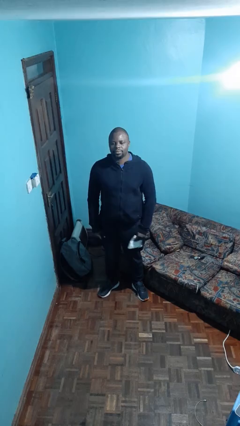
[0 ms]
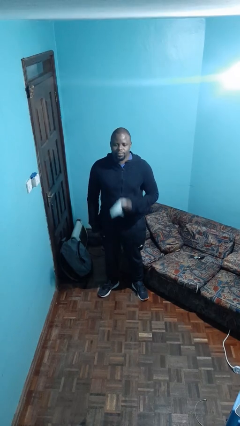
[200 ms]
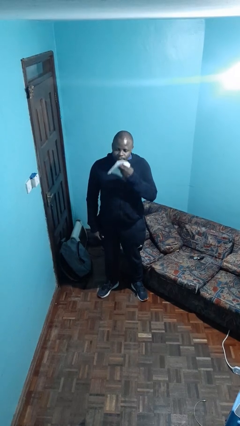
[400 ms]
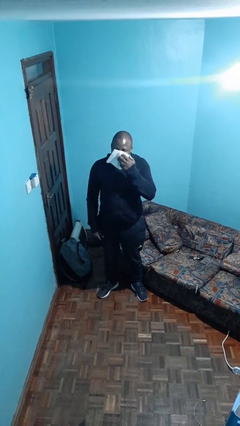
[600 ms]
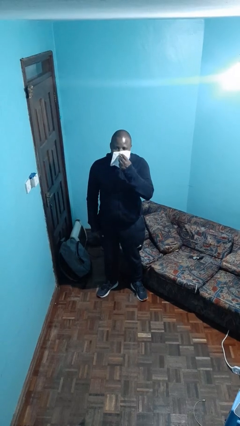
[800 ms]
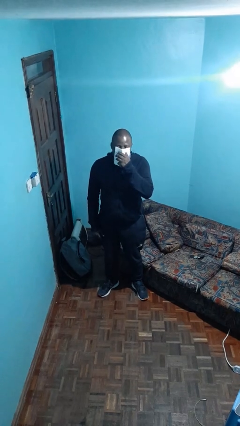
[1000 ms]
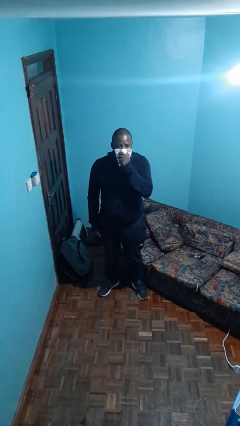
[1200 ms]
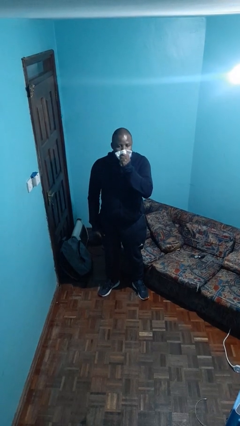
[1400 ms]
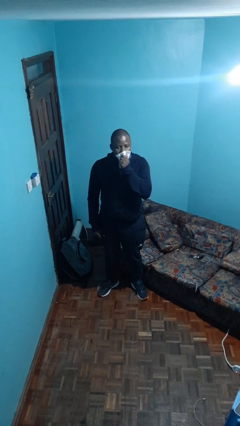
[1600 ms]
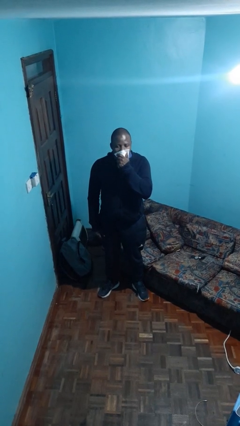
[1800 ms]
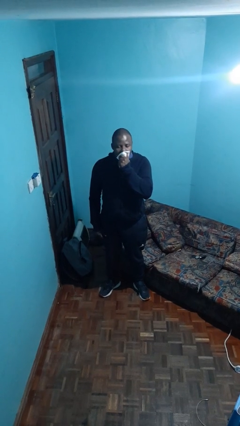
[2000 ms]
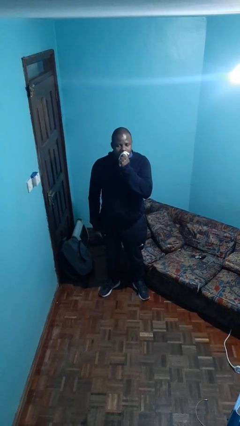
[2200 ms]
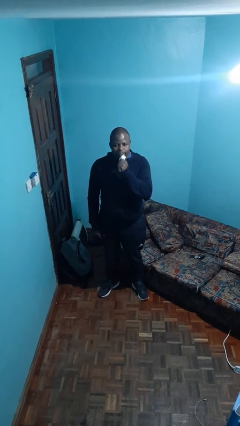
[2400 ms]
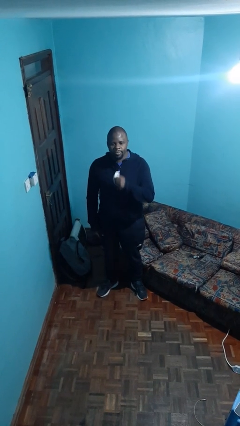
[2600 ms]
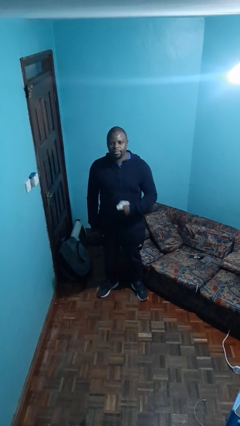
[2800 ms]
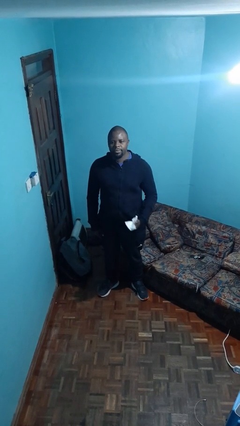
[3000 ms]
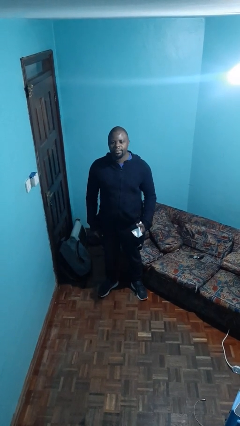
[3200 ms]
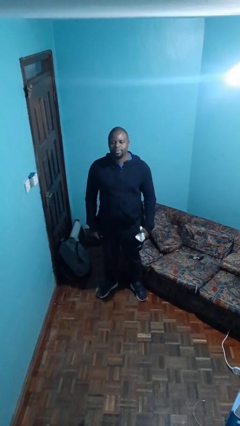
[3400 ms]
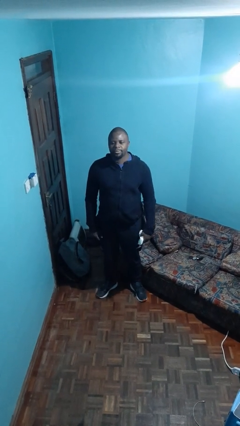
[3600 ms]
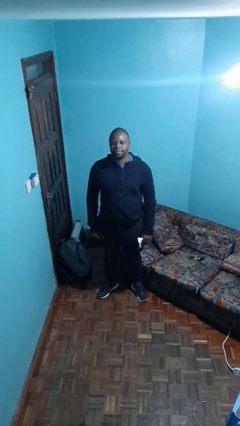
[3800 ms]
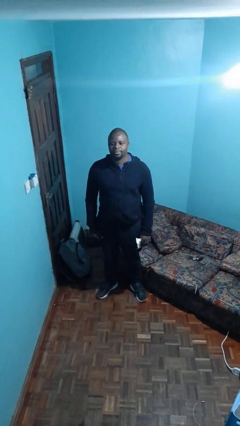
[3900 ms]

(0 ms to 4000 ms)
person wipes mouth with napkin

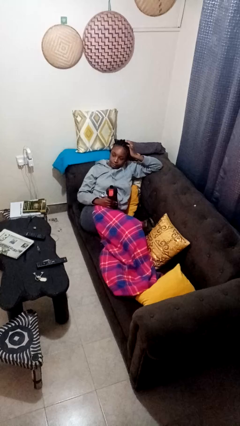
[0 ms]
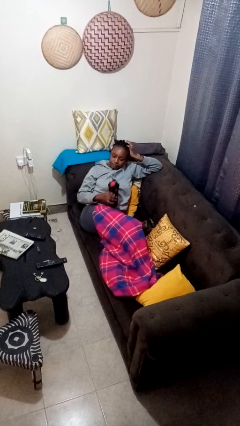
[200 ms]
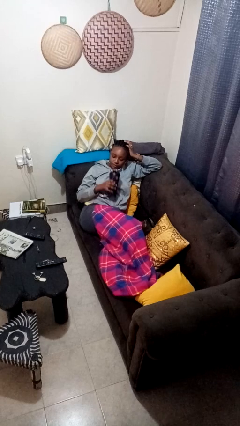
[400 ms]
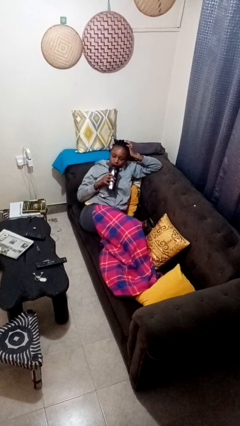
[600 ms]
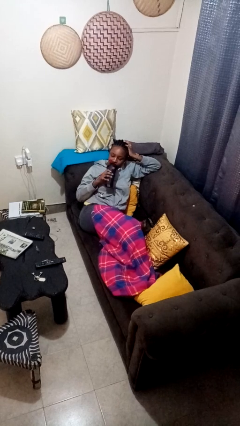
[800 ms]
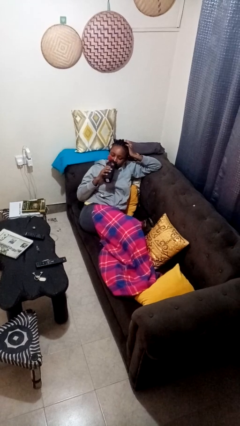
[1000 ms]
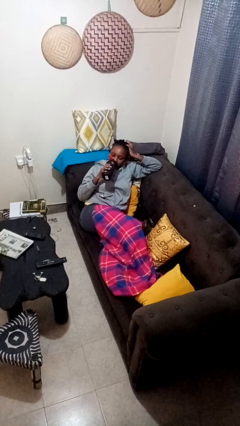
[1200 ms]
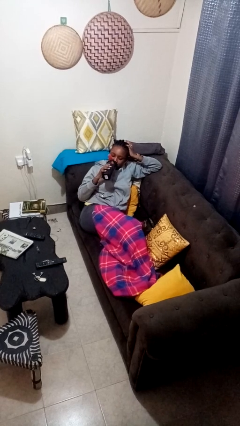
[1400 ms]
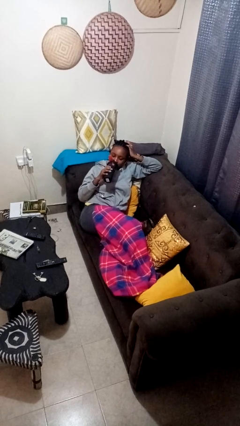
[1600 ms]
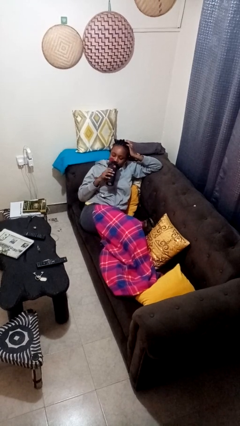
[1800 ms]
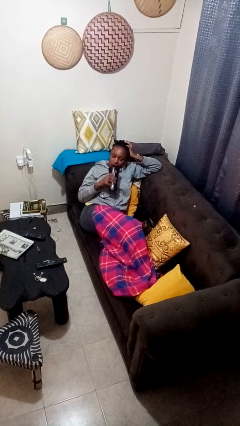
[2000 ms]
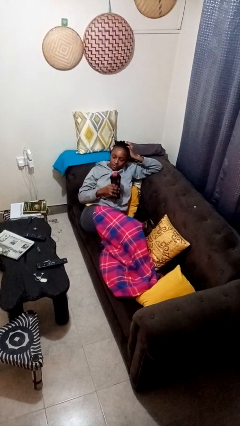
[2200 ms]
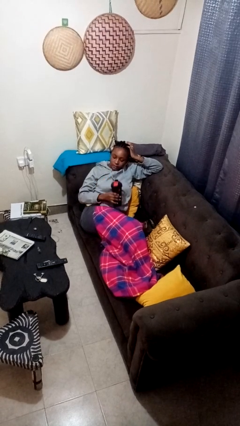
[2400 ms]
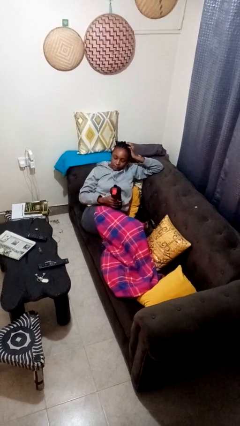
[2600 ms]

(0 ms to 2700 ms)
person drinks from bottle

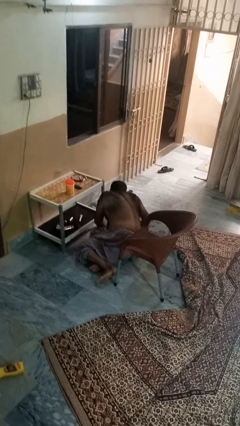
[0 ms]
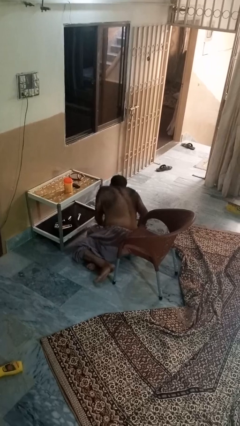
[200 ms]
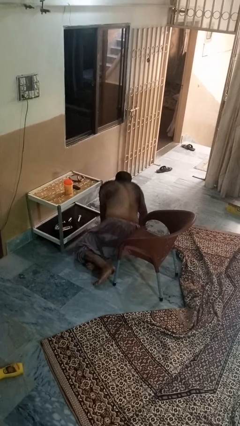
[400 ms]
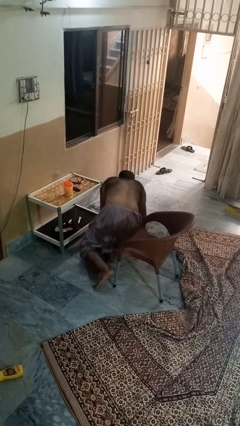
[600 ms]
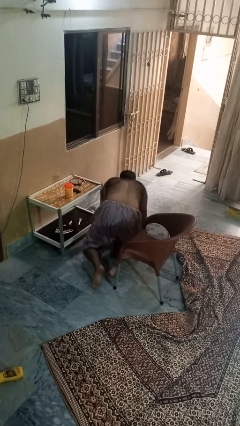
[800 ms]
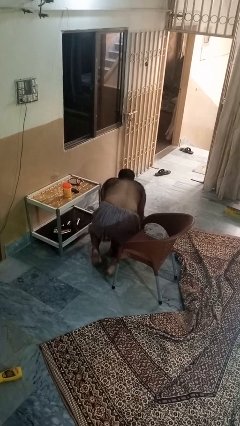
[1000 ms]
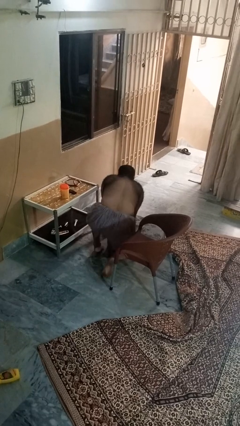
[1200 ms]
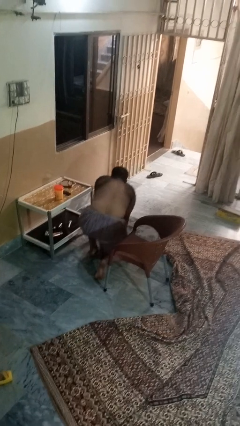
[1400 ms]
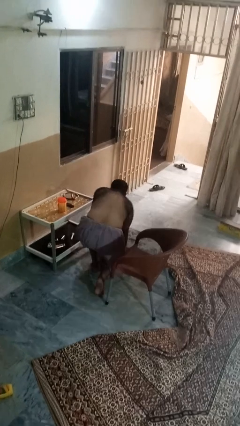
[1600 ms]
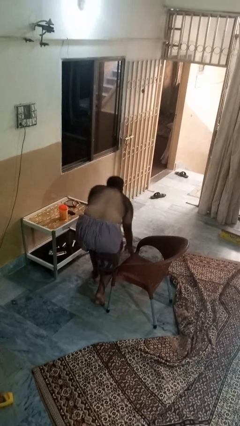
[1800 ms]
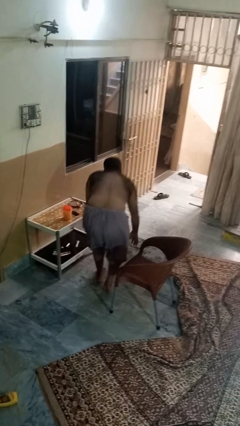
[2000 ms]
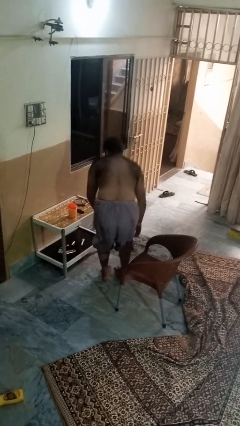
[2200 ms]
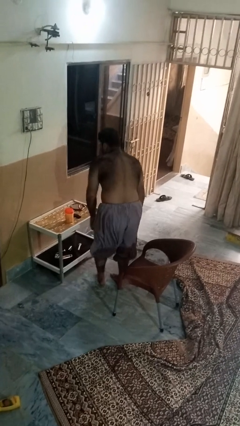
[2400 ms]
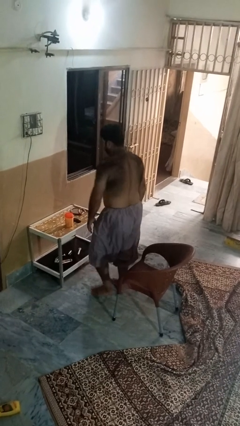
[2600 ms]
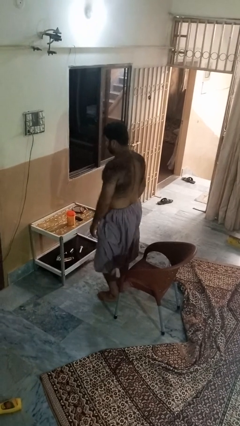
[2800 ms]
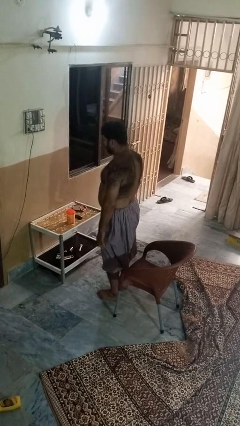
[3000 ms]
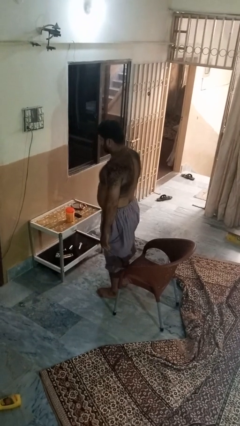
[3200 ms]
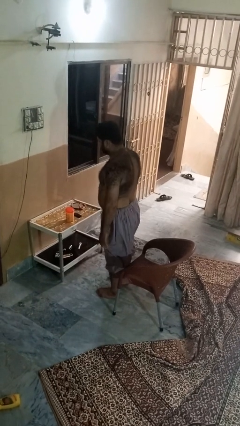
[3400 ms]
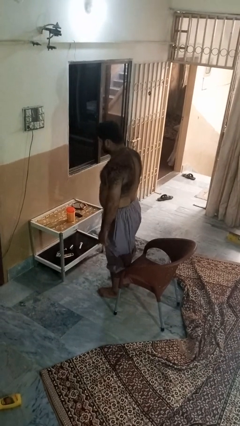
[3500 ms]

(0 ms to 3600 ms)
person stands up from floor

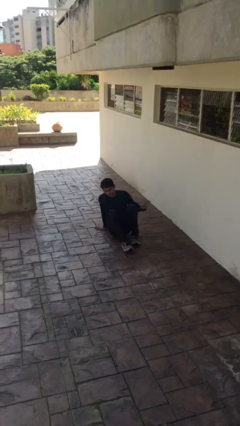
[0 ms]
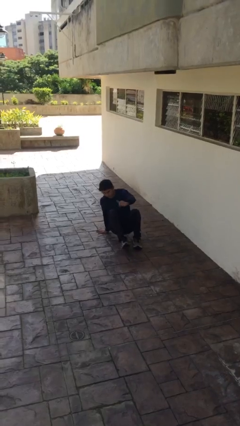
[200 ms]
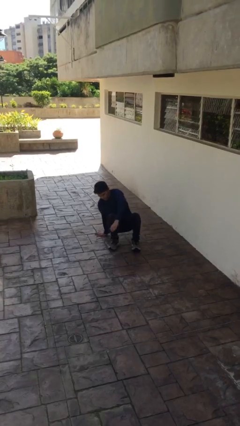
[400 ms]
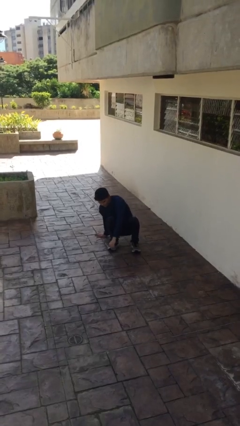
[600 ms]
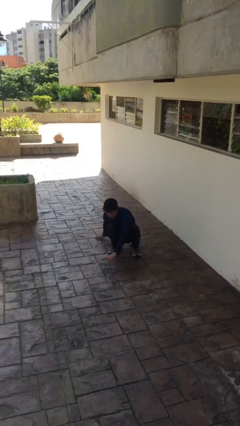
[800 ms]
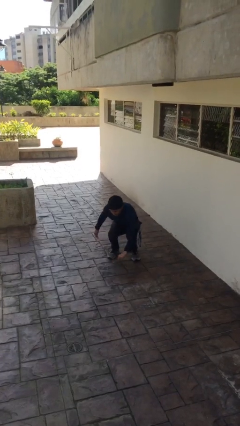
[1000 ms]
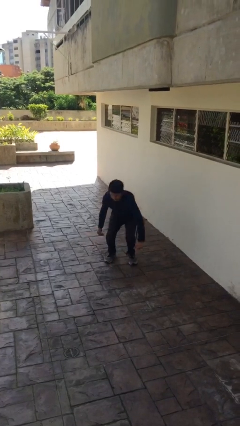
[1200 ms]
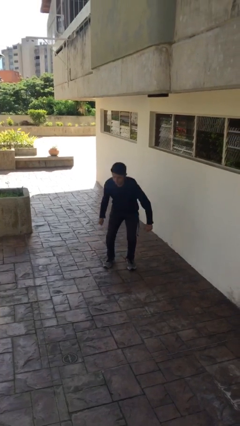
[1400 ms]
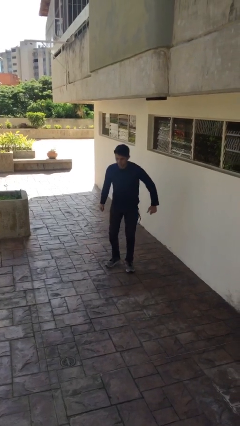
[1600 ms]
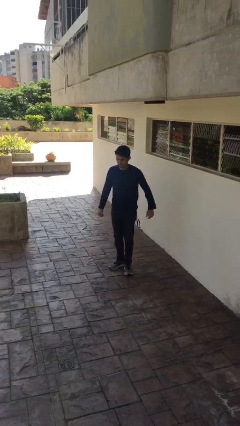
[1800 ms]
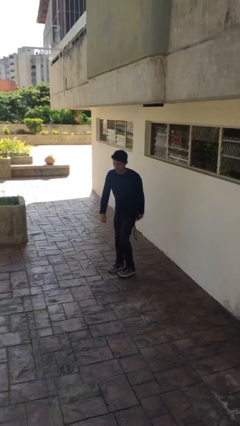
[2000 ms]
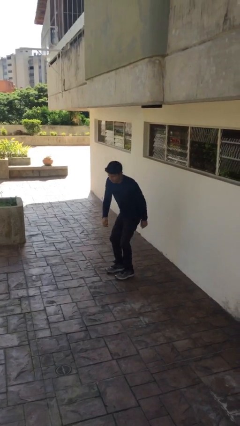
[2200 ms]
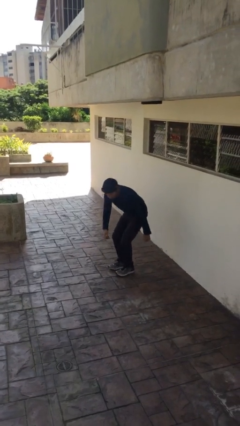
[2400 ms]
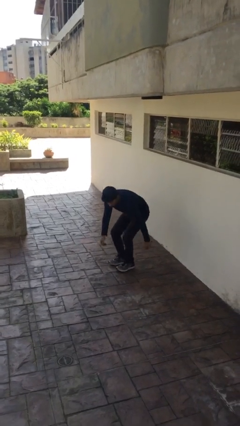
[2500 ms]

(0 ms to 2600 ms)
person stands up

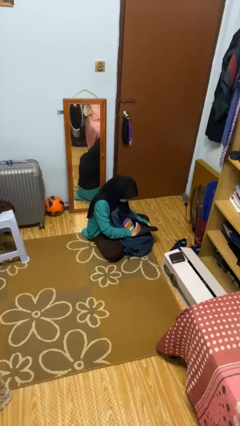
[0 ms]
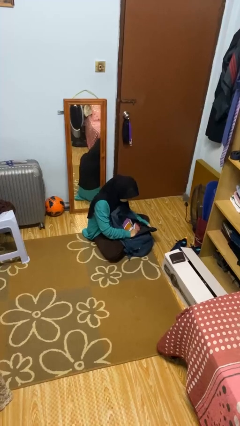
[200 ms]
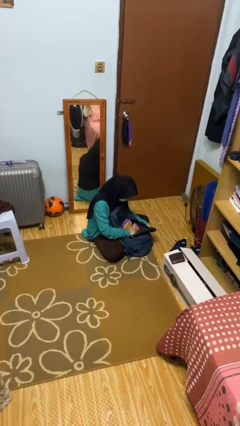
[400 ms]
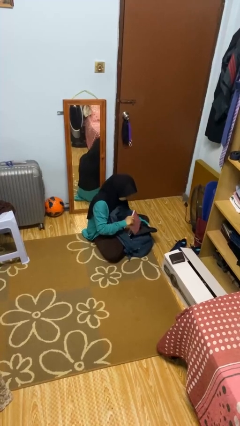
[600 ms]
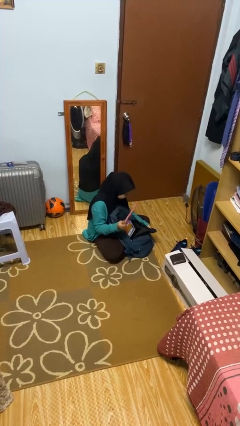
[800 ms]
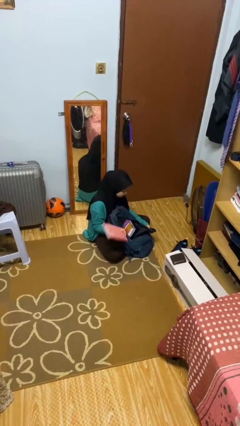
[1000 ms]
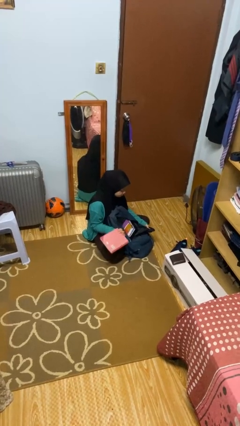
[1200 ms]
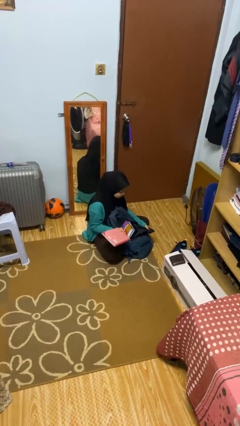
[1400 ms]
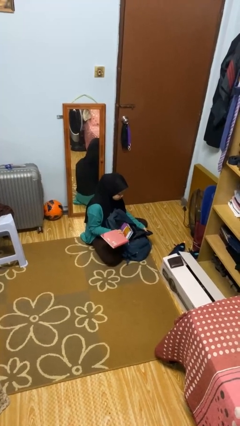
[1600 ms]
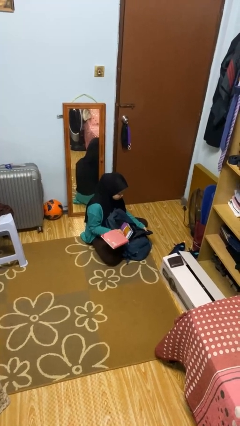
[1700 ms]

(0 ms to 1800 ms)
person takes object from backpack

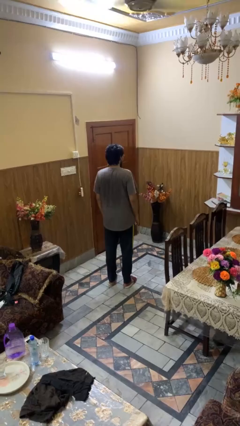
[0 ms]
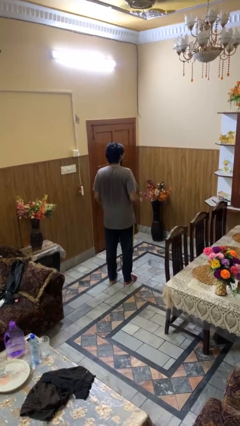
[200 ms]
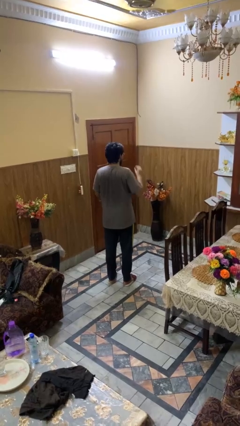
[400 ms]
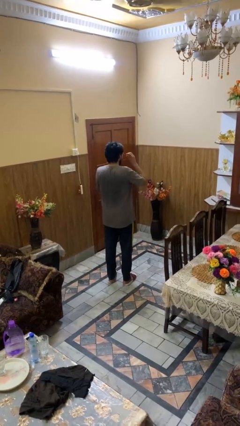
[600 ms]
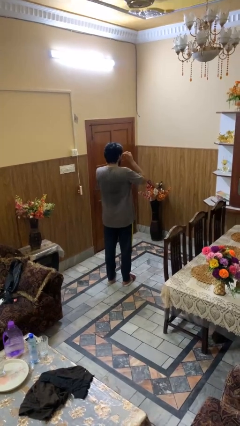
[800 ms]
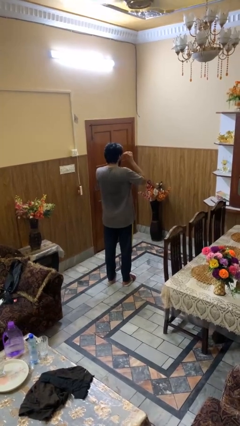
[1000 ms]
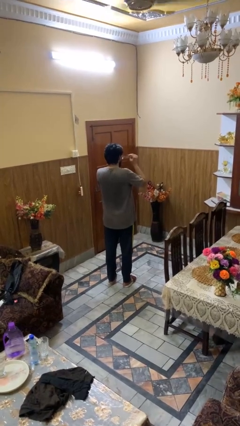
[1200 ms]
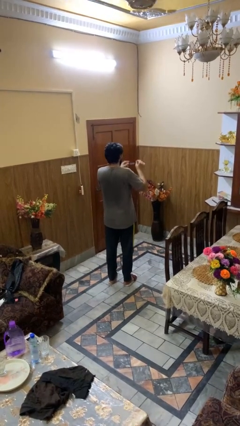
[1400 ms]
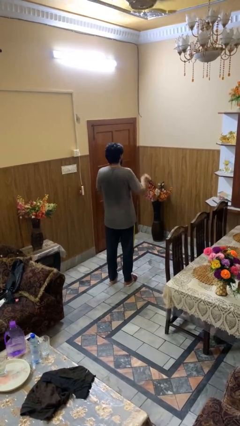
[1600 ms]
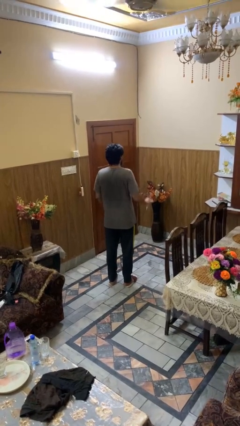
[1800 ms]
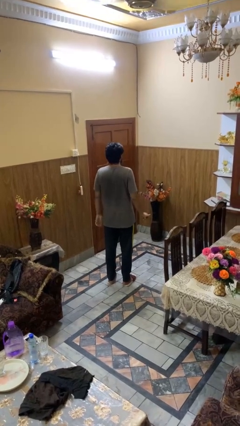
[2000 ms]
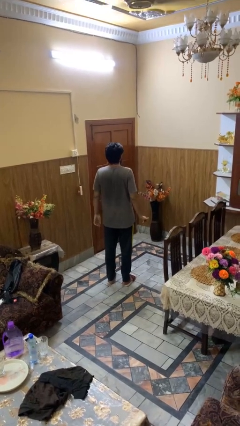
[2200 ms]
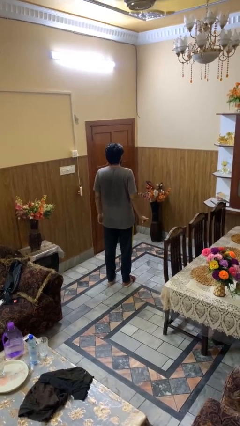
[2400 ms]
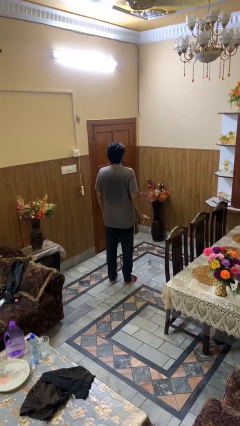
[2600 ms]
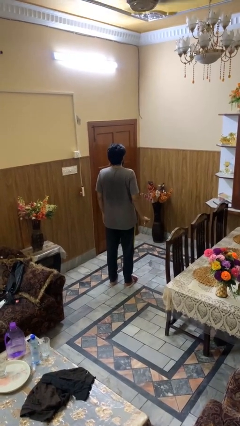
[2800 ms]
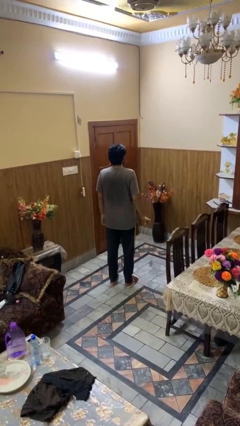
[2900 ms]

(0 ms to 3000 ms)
person takes off glasses

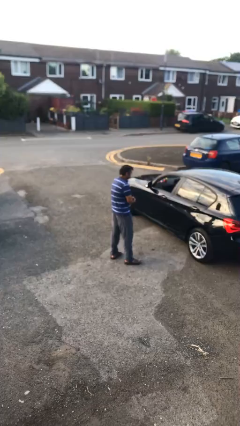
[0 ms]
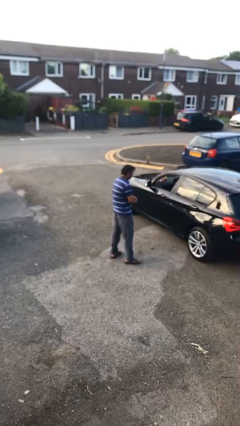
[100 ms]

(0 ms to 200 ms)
person opens car door
